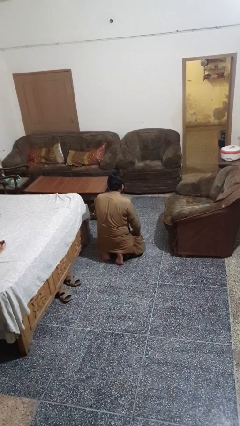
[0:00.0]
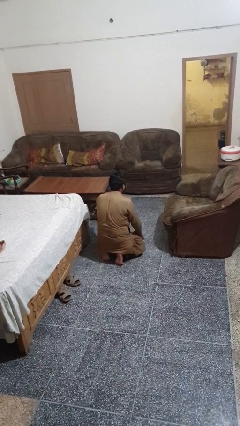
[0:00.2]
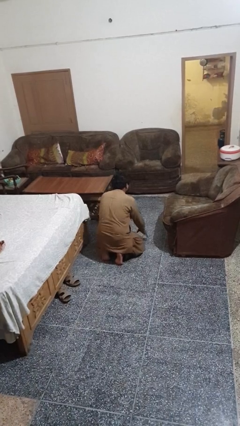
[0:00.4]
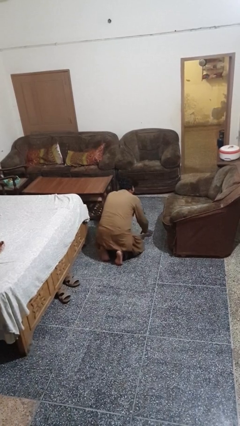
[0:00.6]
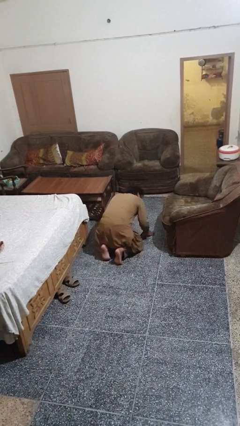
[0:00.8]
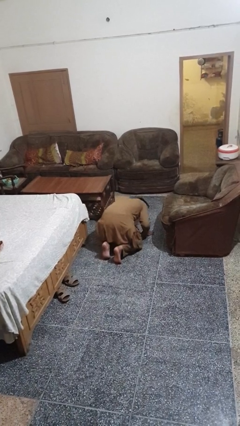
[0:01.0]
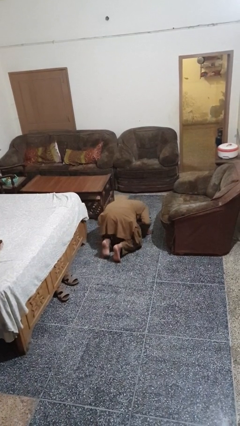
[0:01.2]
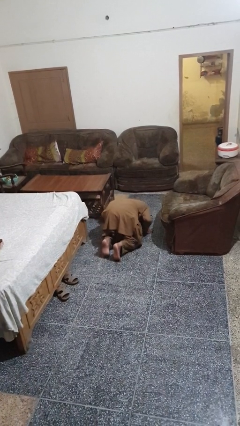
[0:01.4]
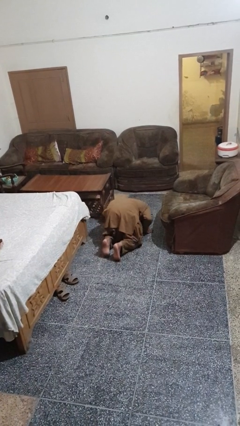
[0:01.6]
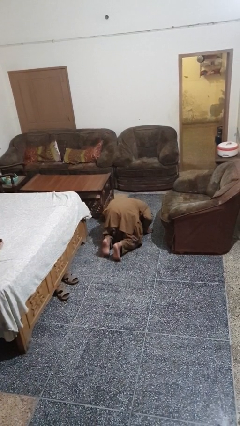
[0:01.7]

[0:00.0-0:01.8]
person searches under couch

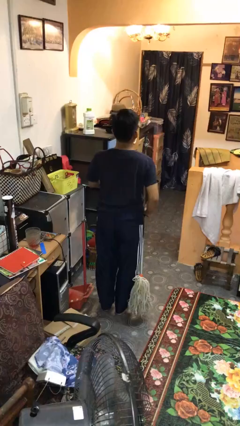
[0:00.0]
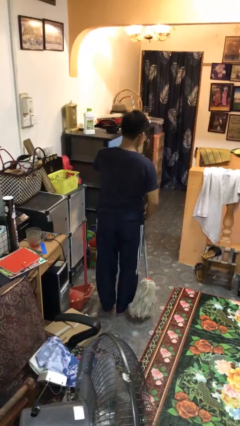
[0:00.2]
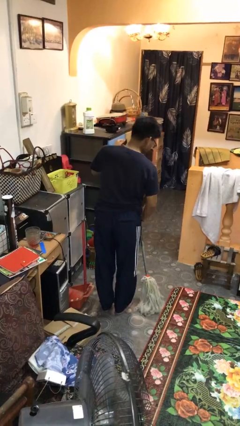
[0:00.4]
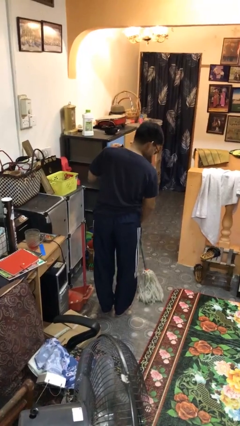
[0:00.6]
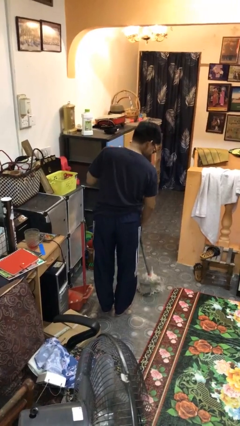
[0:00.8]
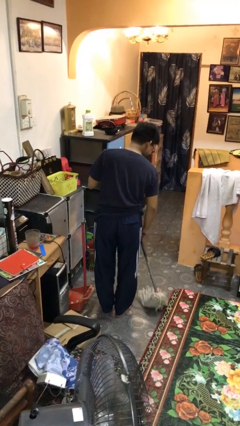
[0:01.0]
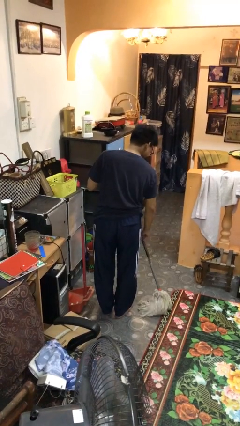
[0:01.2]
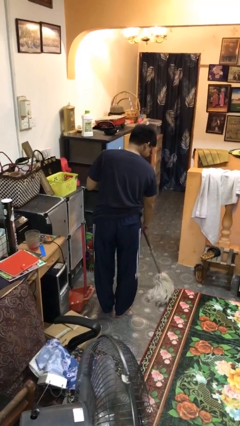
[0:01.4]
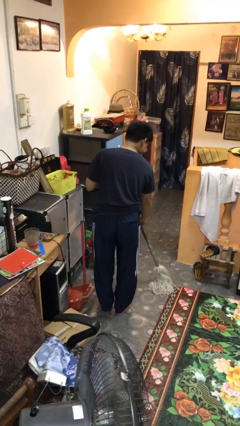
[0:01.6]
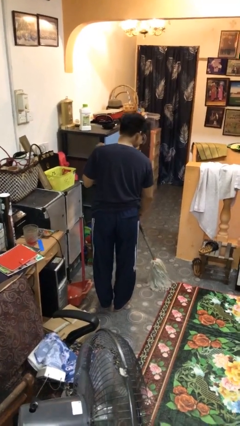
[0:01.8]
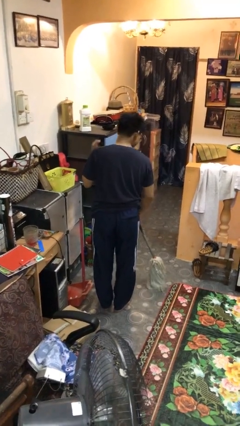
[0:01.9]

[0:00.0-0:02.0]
person mops

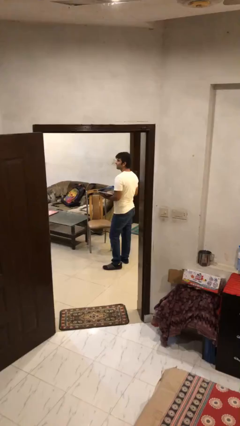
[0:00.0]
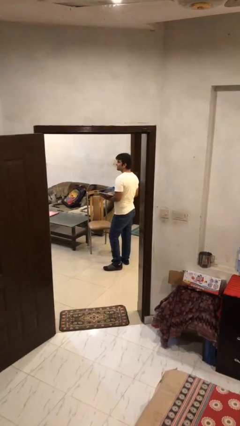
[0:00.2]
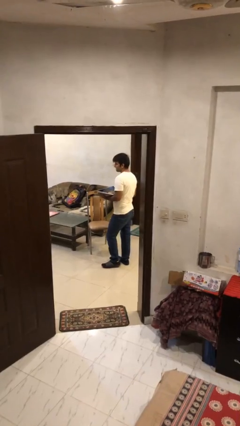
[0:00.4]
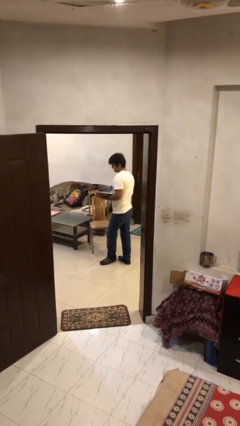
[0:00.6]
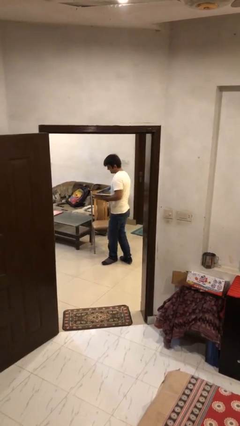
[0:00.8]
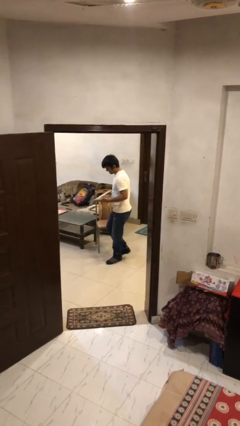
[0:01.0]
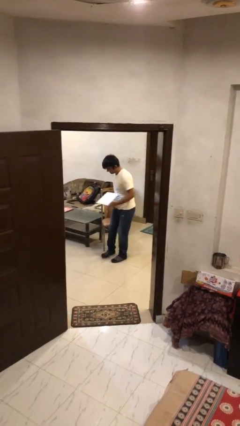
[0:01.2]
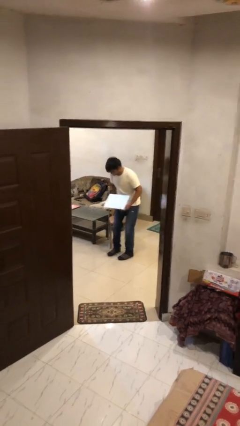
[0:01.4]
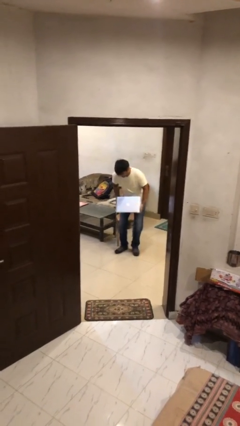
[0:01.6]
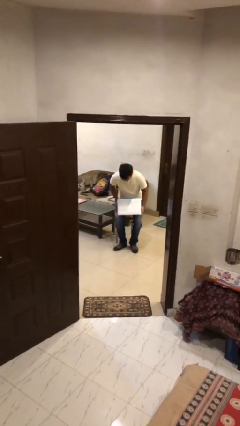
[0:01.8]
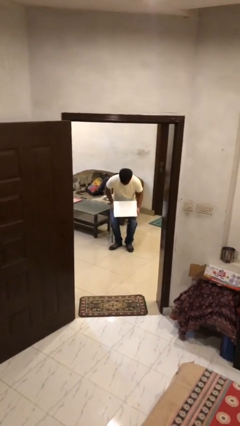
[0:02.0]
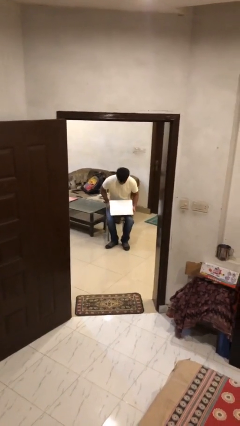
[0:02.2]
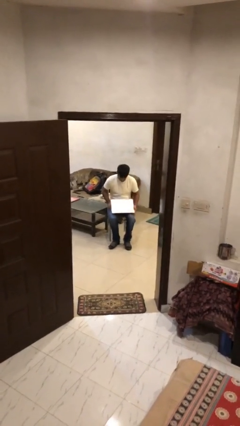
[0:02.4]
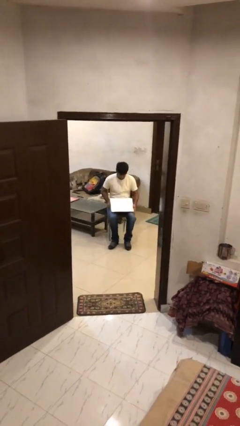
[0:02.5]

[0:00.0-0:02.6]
person sits down

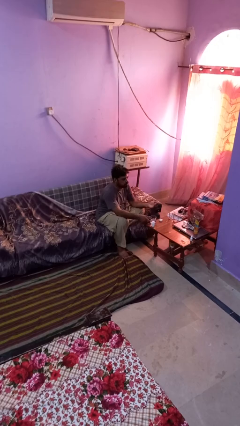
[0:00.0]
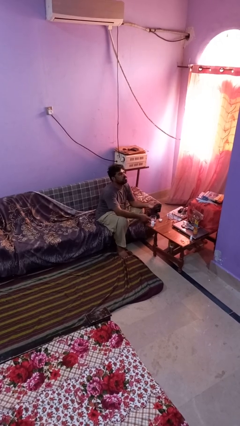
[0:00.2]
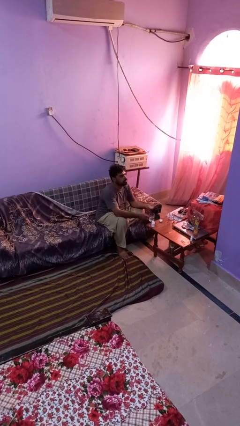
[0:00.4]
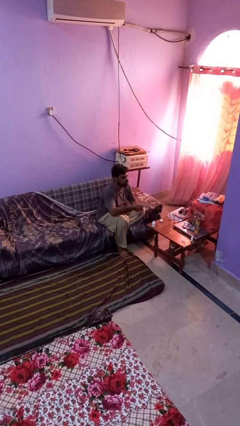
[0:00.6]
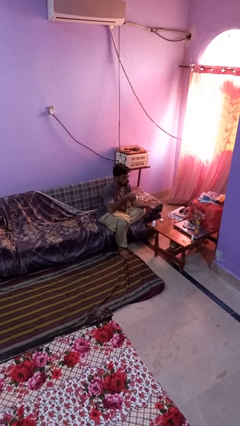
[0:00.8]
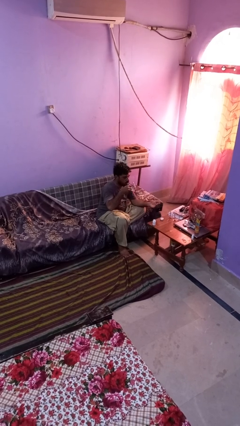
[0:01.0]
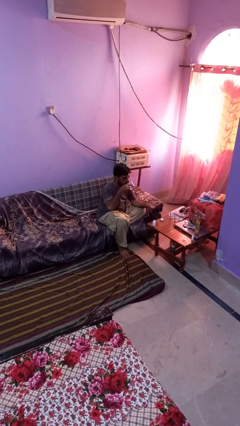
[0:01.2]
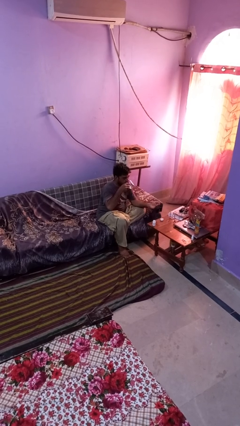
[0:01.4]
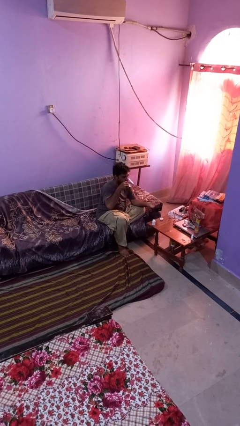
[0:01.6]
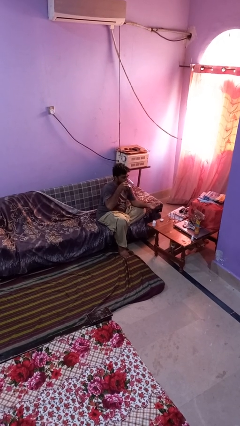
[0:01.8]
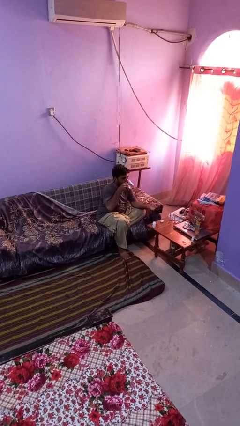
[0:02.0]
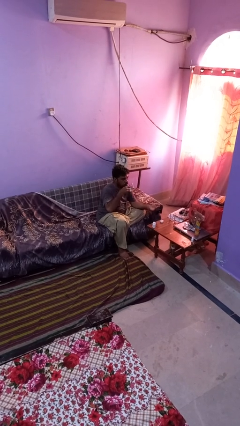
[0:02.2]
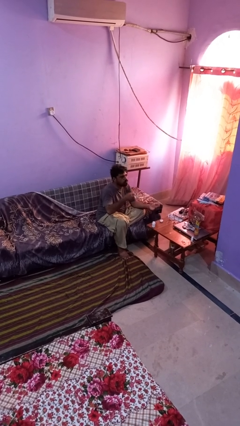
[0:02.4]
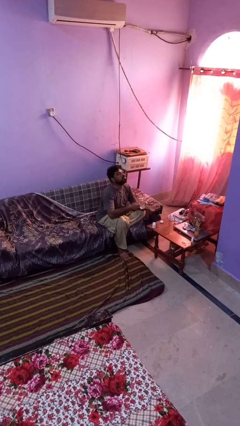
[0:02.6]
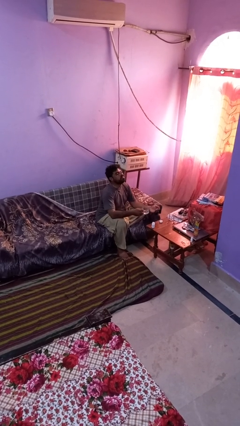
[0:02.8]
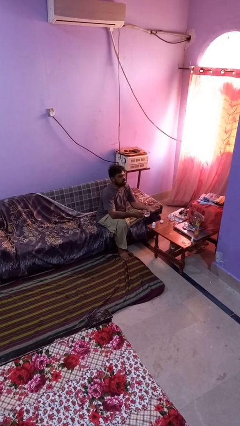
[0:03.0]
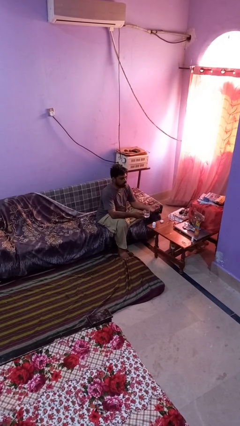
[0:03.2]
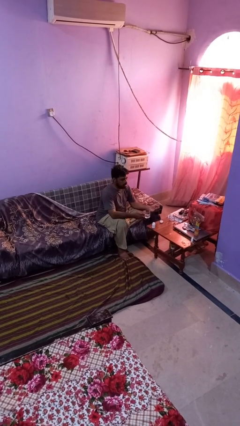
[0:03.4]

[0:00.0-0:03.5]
person drinks from cup

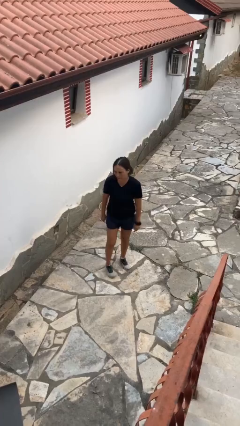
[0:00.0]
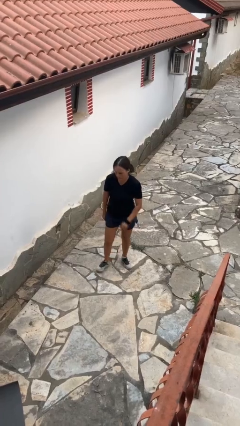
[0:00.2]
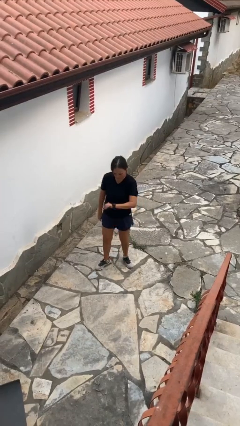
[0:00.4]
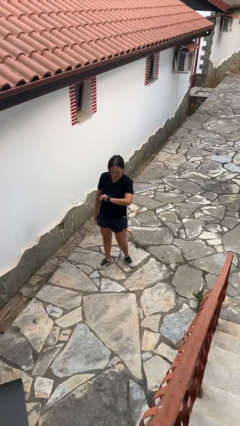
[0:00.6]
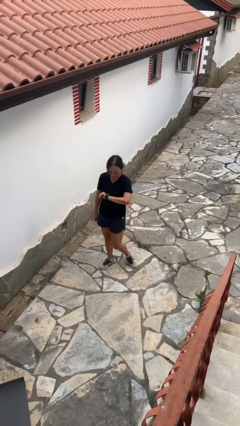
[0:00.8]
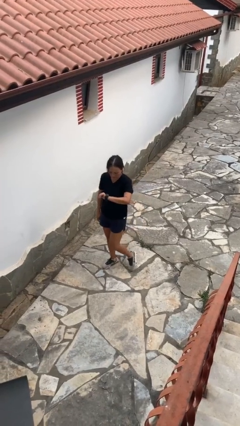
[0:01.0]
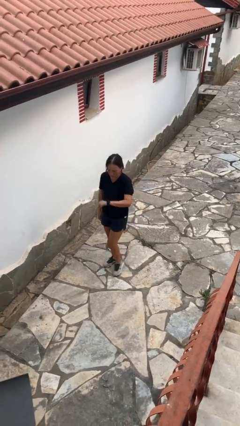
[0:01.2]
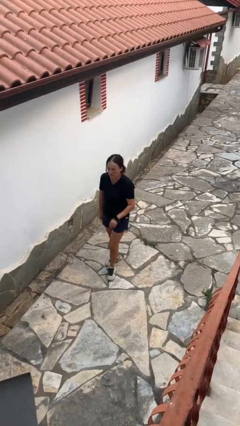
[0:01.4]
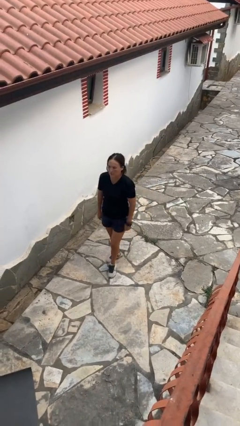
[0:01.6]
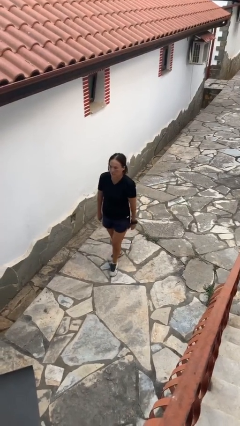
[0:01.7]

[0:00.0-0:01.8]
person looks at wristwatch

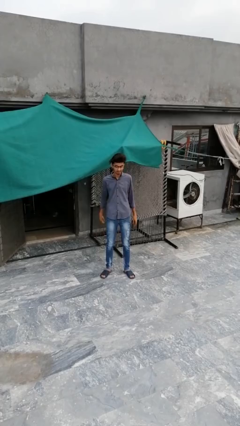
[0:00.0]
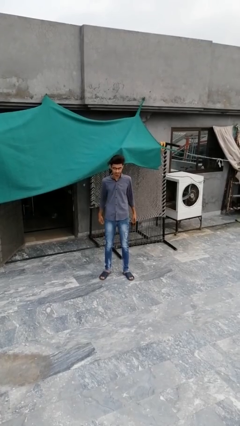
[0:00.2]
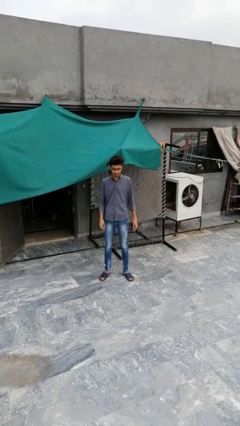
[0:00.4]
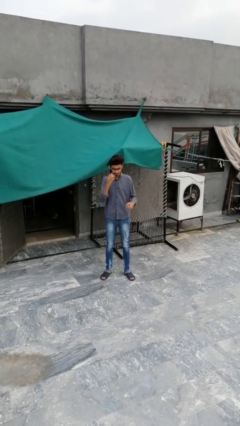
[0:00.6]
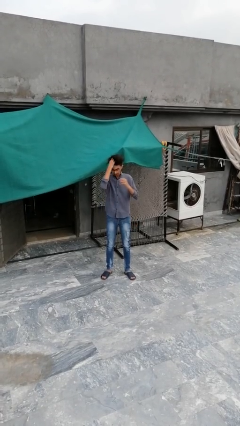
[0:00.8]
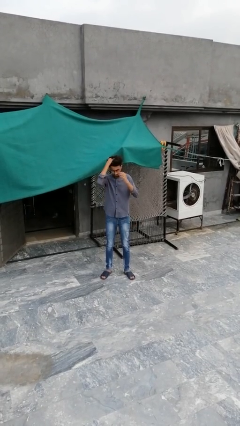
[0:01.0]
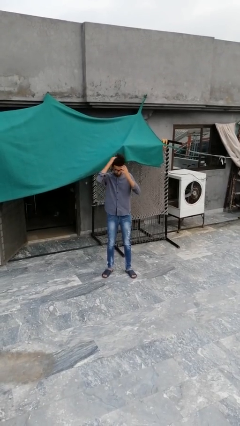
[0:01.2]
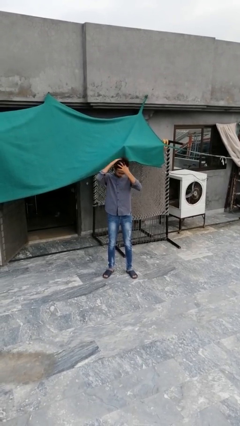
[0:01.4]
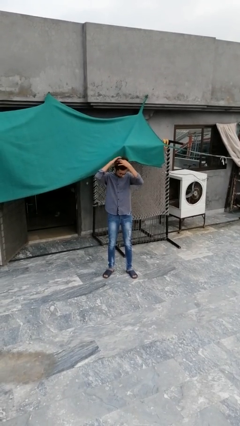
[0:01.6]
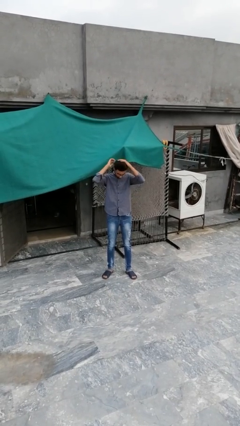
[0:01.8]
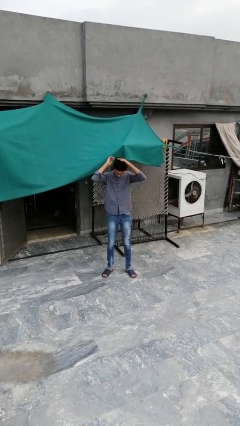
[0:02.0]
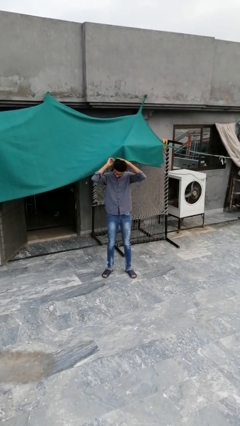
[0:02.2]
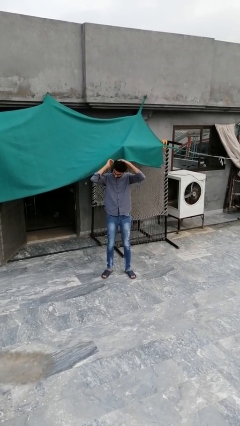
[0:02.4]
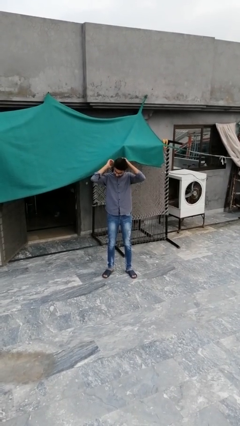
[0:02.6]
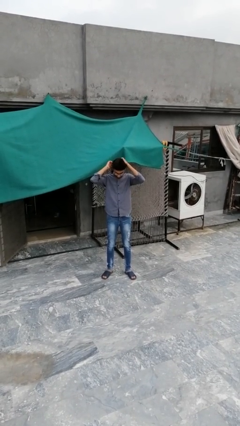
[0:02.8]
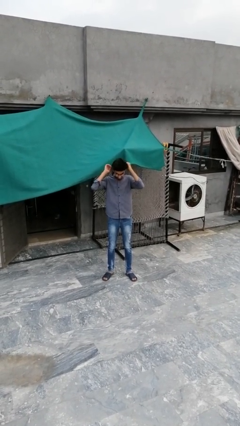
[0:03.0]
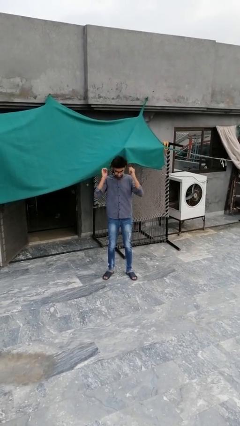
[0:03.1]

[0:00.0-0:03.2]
person strokes hair

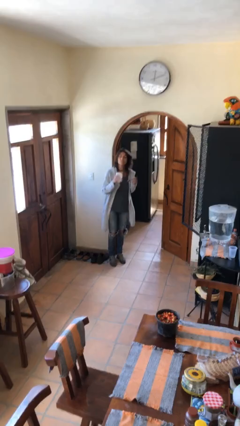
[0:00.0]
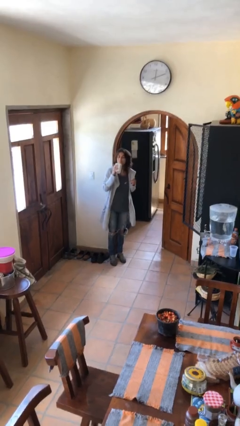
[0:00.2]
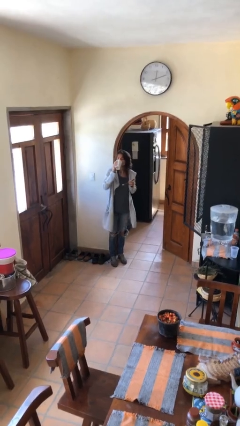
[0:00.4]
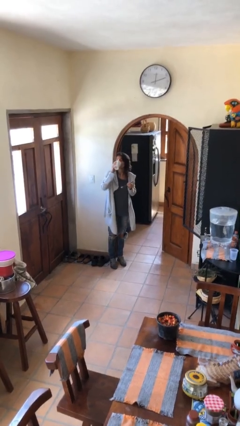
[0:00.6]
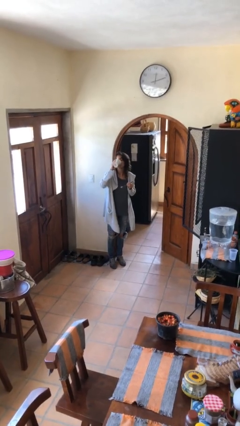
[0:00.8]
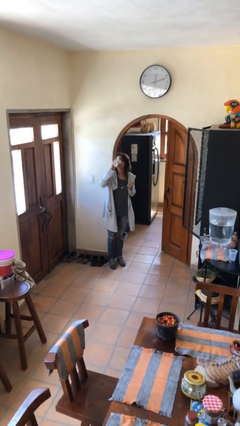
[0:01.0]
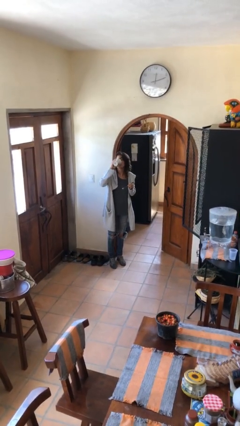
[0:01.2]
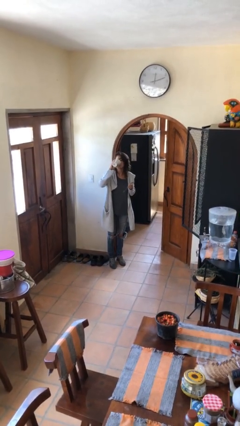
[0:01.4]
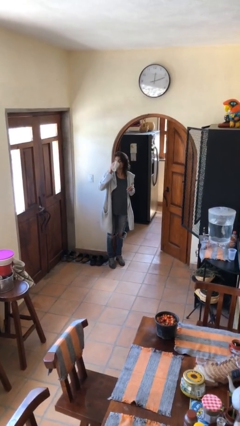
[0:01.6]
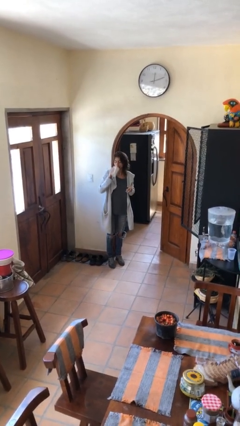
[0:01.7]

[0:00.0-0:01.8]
person drinks from mug
